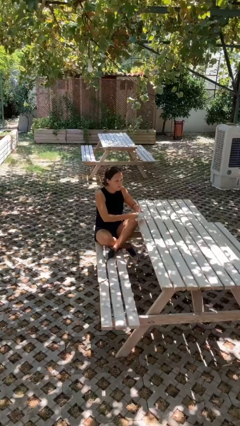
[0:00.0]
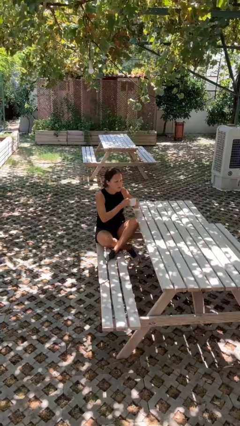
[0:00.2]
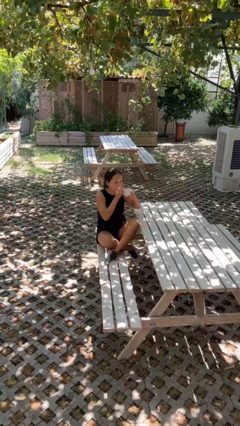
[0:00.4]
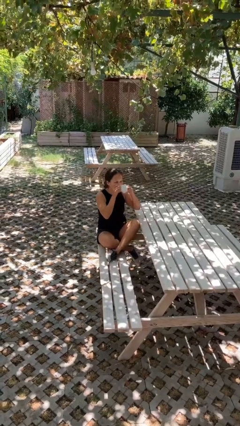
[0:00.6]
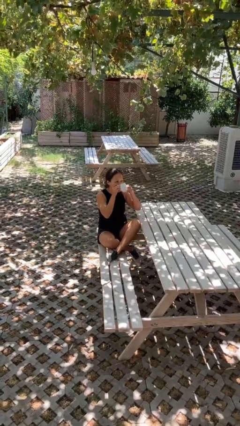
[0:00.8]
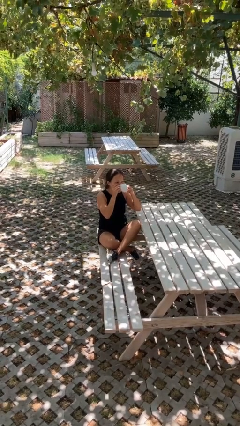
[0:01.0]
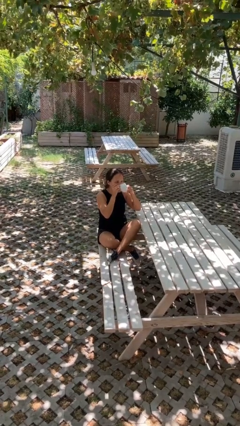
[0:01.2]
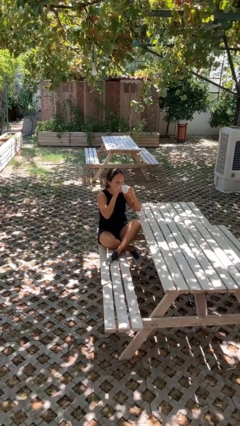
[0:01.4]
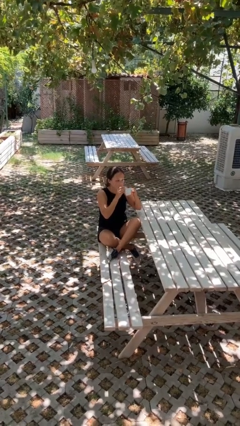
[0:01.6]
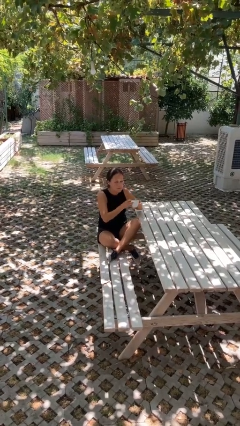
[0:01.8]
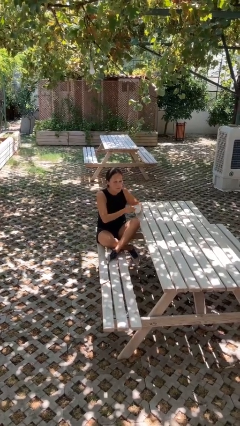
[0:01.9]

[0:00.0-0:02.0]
person drinks from mug

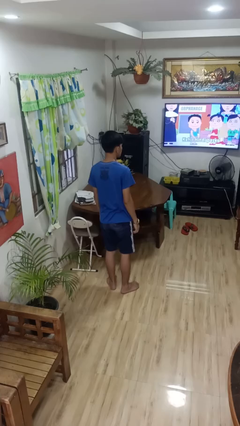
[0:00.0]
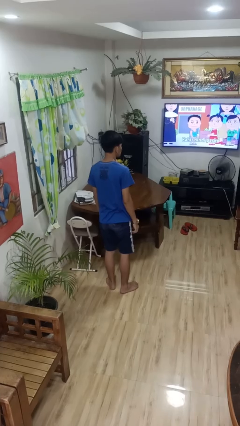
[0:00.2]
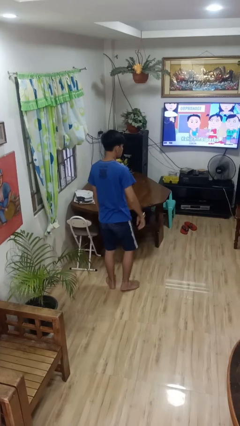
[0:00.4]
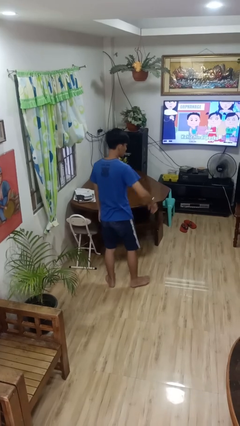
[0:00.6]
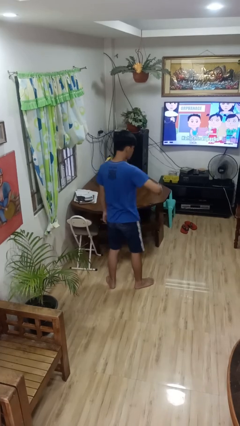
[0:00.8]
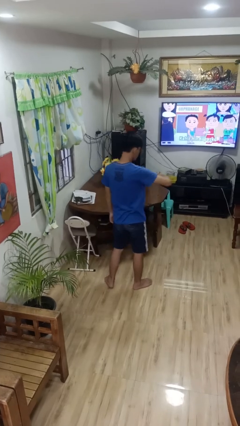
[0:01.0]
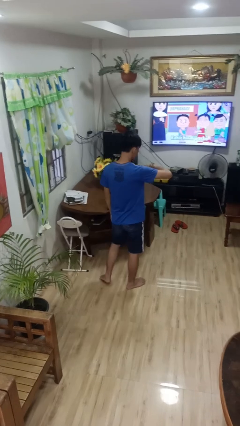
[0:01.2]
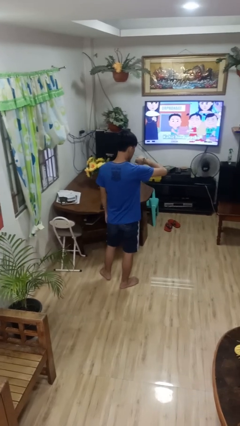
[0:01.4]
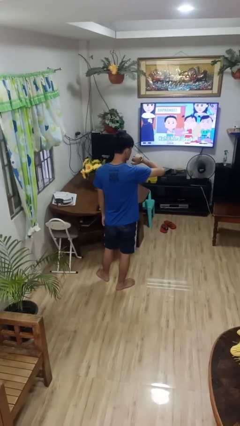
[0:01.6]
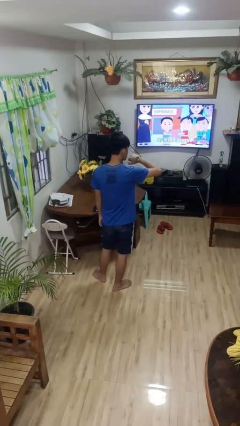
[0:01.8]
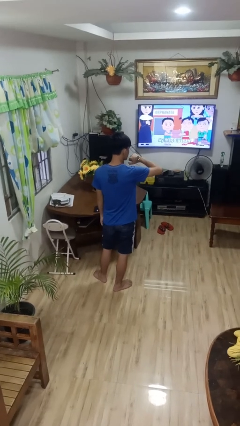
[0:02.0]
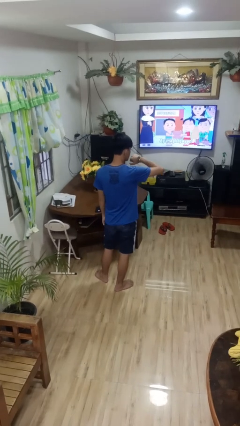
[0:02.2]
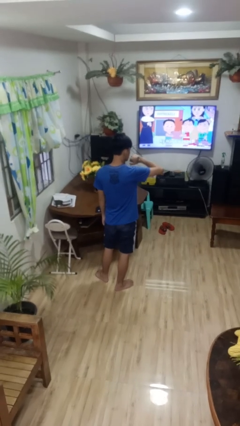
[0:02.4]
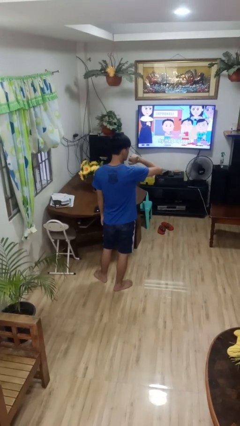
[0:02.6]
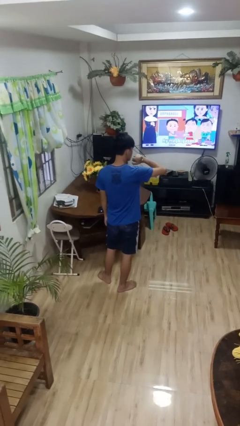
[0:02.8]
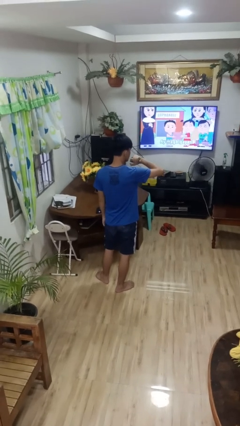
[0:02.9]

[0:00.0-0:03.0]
person looks at wristwatch

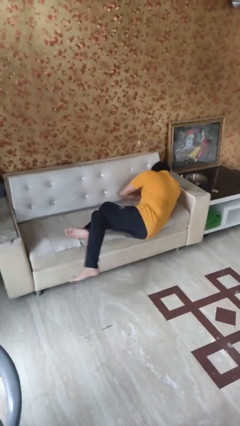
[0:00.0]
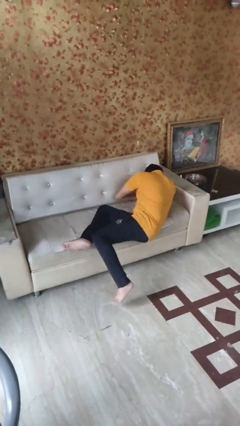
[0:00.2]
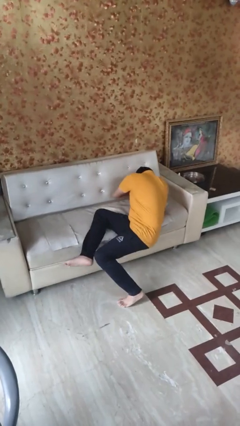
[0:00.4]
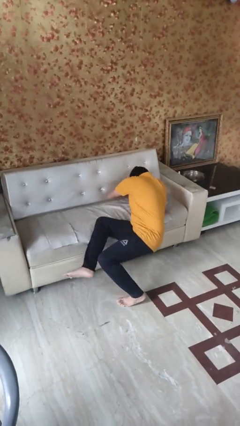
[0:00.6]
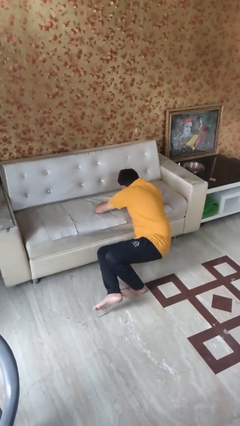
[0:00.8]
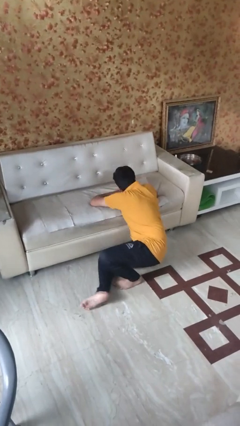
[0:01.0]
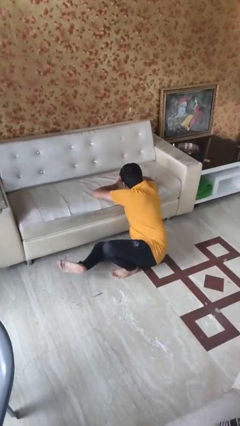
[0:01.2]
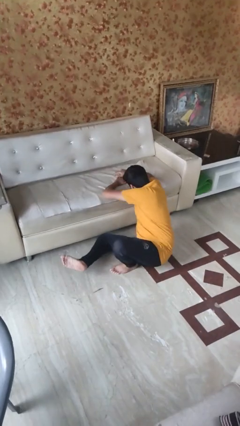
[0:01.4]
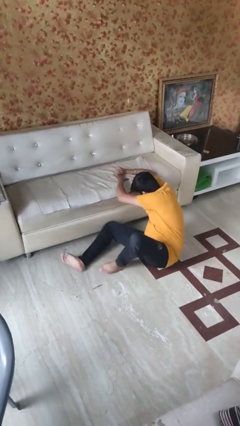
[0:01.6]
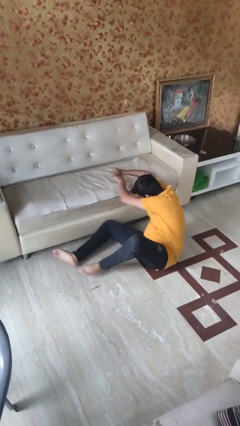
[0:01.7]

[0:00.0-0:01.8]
person falls from bed

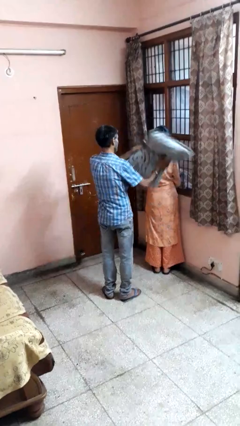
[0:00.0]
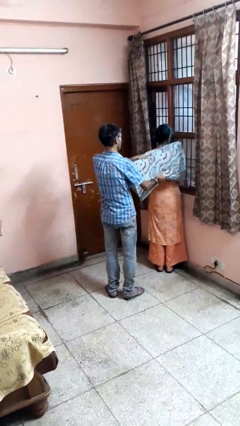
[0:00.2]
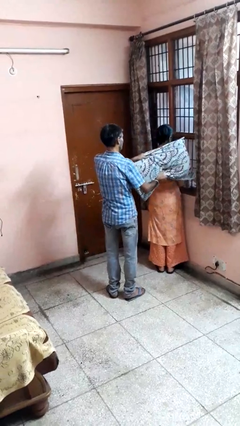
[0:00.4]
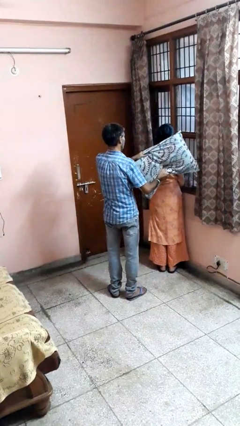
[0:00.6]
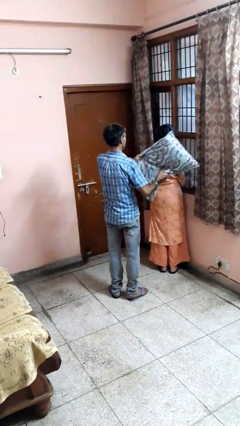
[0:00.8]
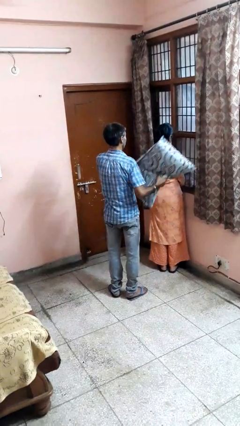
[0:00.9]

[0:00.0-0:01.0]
person hits person with pillow

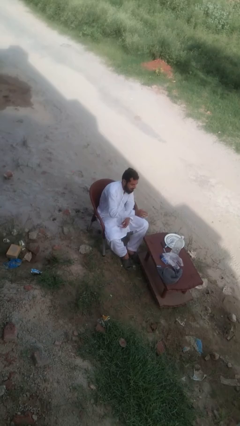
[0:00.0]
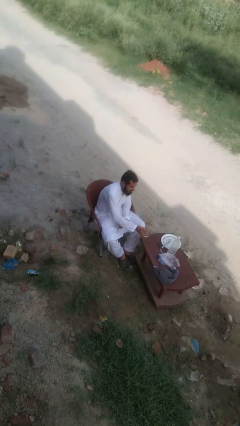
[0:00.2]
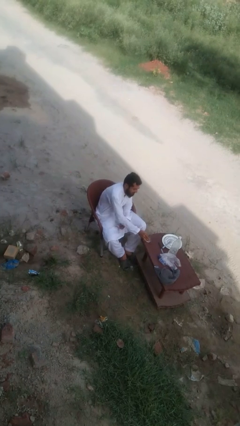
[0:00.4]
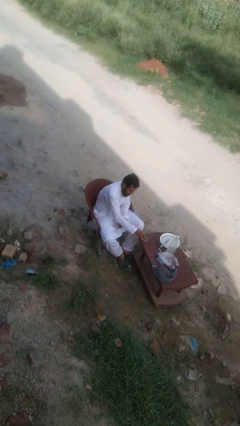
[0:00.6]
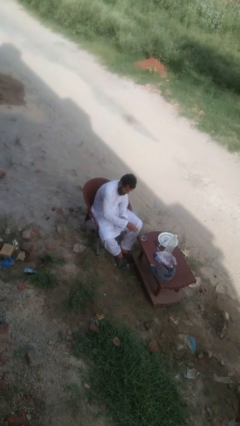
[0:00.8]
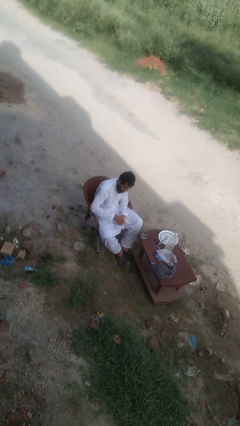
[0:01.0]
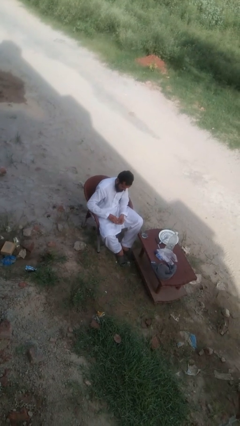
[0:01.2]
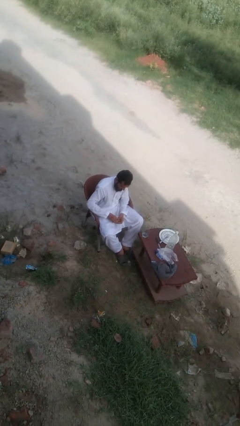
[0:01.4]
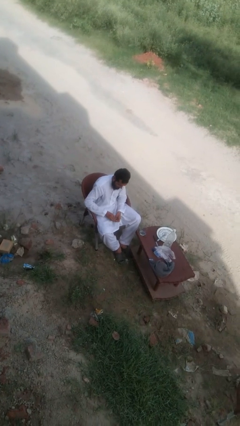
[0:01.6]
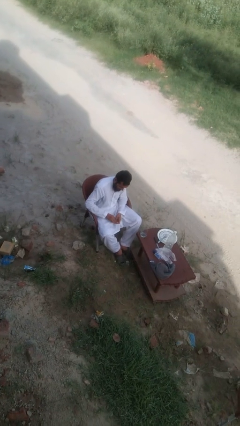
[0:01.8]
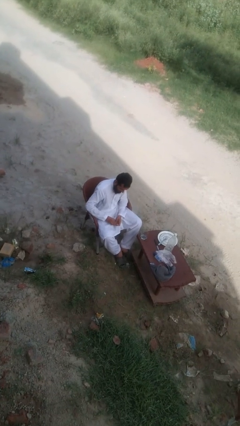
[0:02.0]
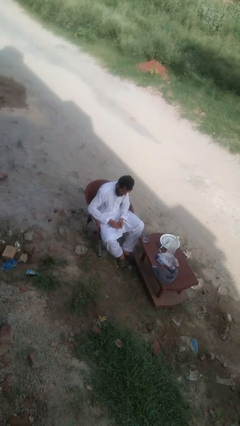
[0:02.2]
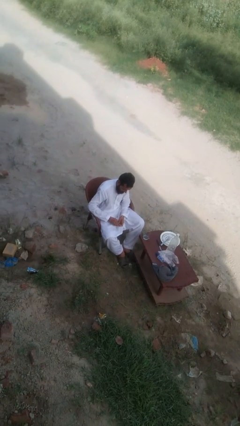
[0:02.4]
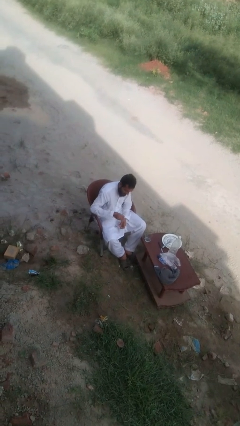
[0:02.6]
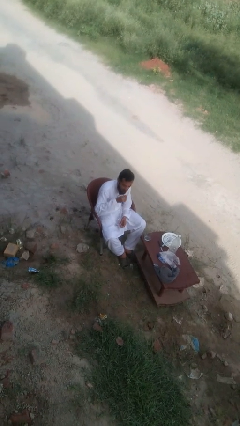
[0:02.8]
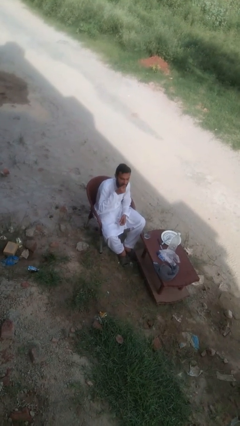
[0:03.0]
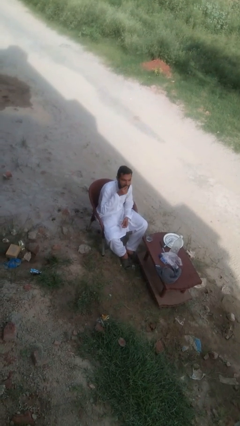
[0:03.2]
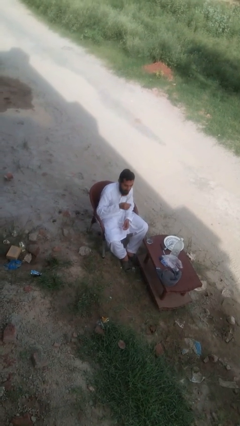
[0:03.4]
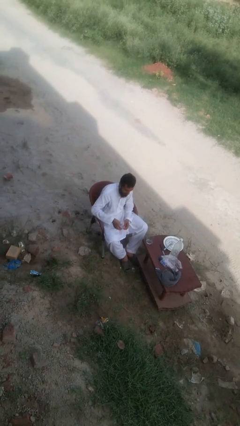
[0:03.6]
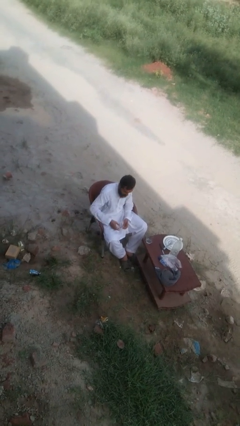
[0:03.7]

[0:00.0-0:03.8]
person takes medicine pills

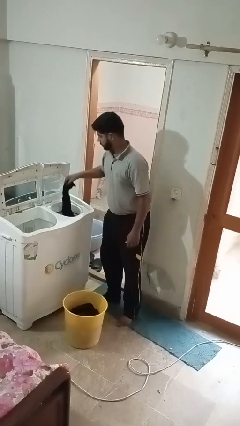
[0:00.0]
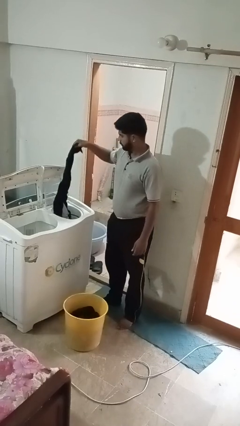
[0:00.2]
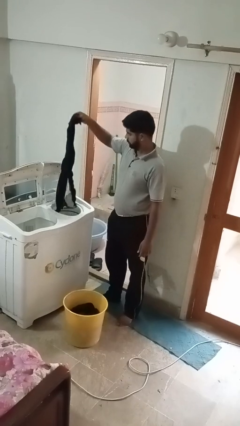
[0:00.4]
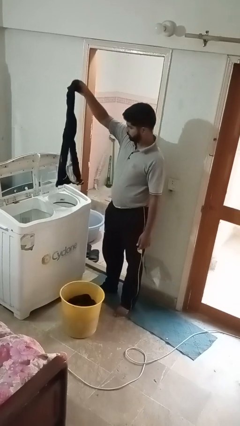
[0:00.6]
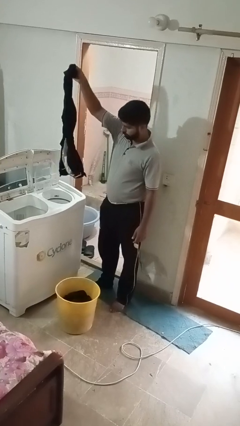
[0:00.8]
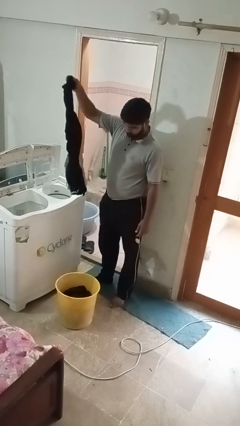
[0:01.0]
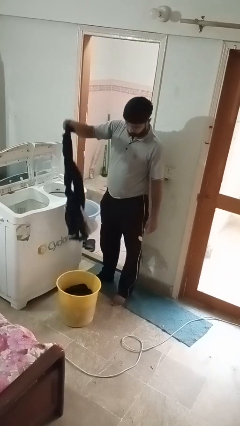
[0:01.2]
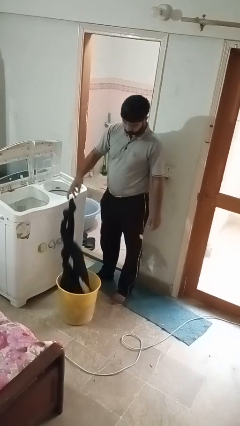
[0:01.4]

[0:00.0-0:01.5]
person unloads dryer

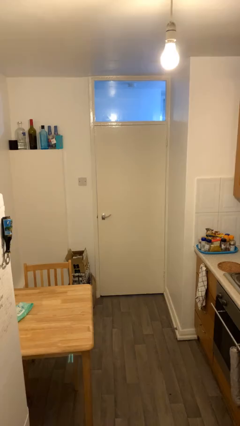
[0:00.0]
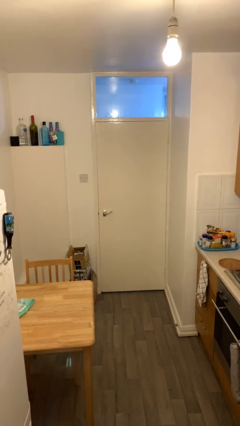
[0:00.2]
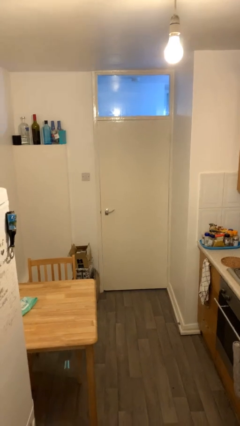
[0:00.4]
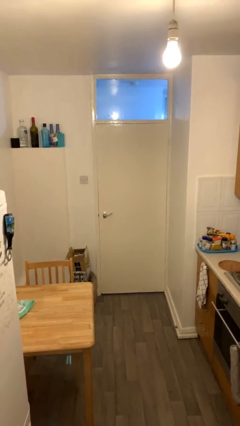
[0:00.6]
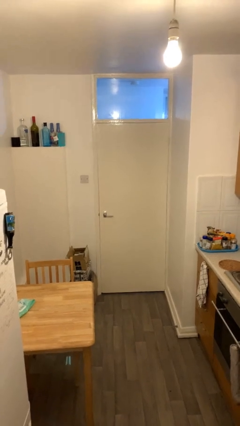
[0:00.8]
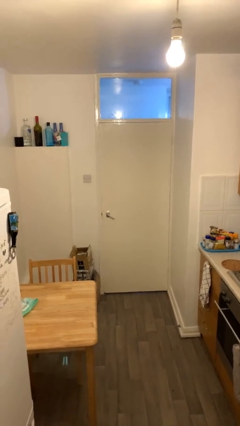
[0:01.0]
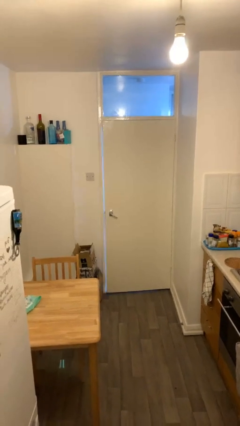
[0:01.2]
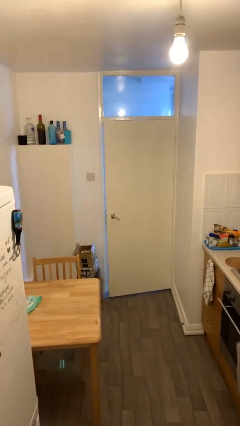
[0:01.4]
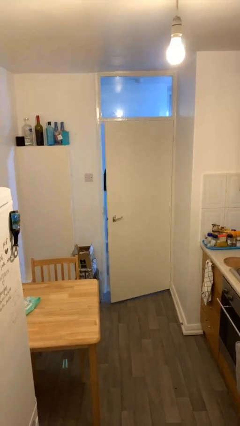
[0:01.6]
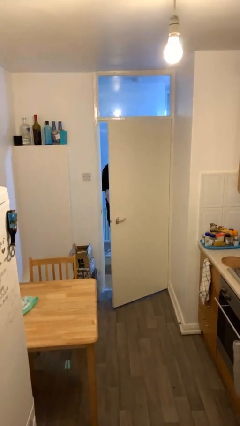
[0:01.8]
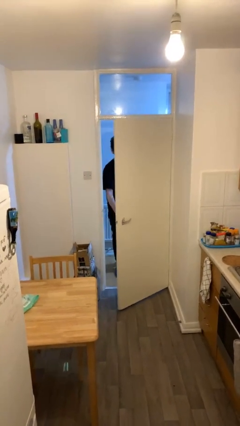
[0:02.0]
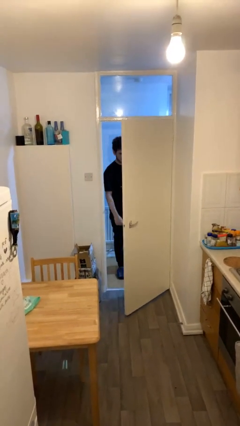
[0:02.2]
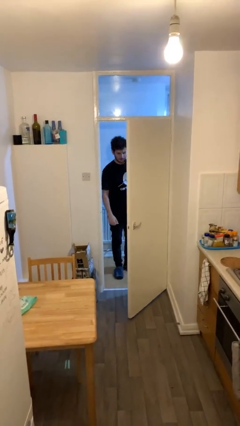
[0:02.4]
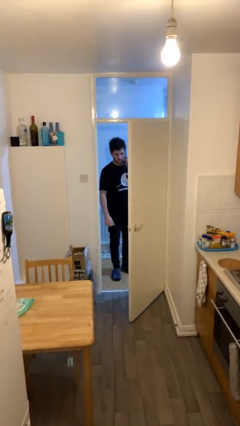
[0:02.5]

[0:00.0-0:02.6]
person opens facility door

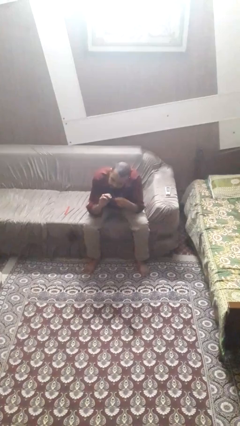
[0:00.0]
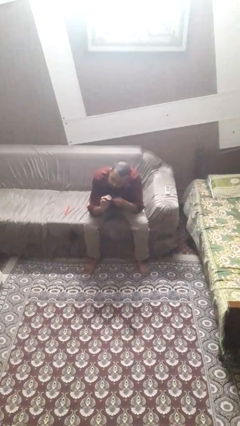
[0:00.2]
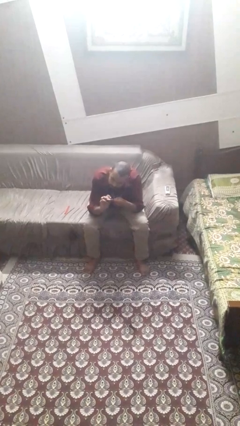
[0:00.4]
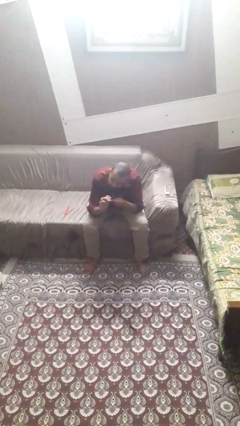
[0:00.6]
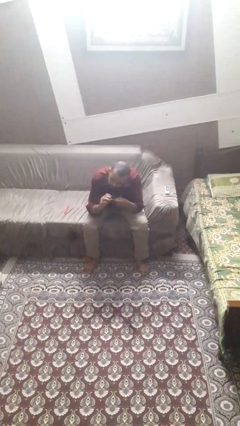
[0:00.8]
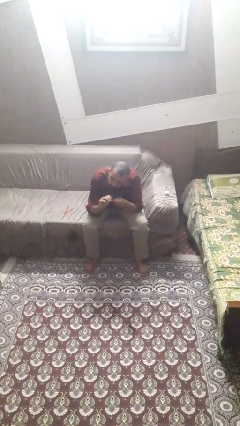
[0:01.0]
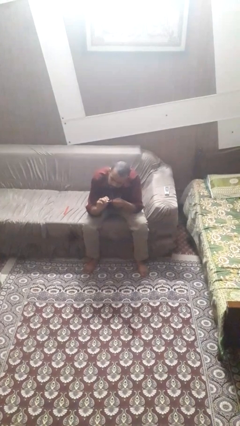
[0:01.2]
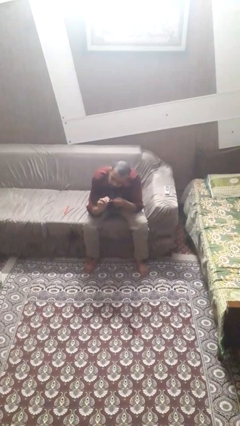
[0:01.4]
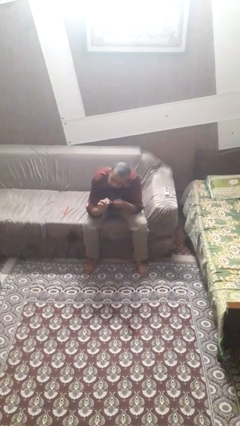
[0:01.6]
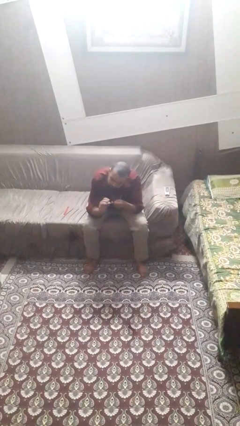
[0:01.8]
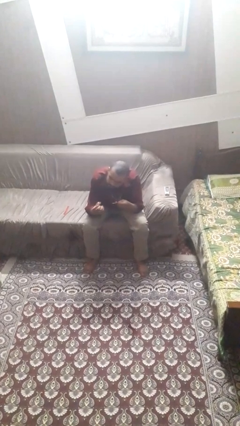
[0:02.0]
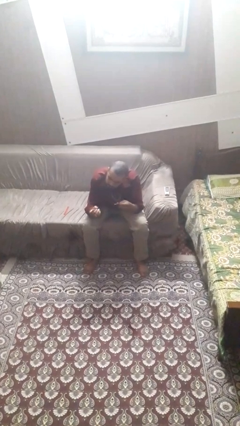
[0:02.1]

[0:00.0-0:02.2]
person files fingernails
